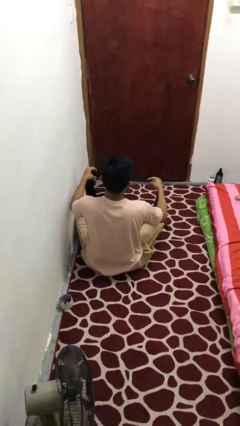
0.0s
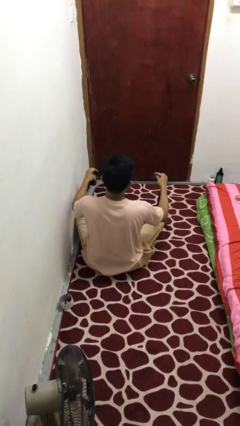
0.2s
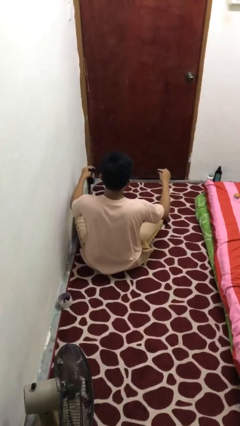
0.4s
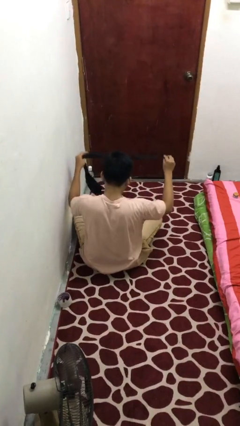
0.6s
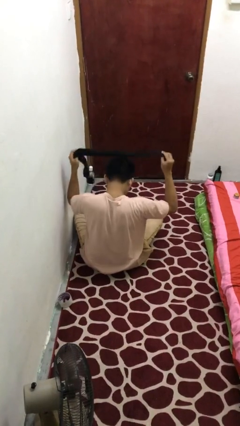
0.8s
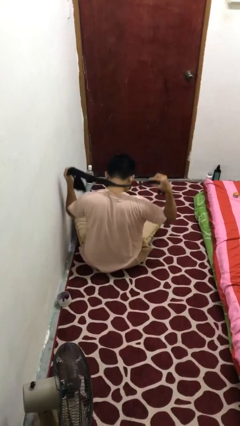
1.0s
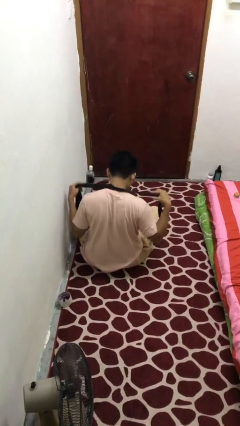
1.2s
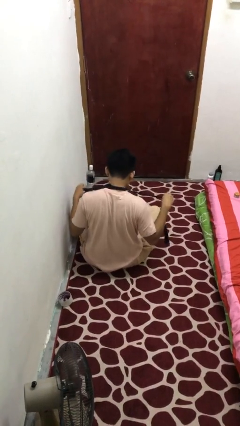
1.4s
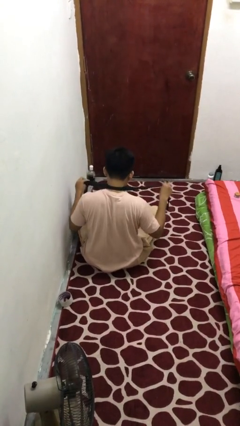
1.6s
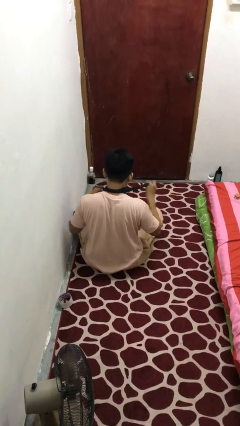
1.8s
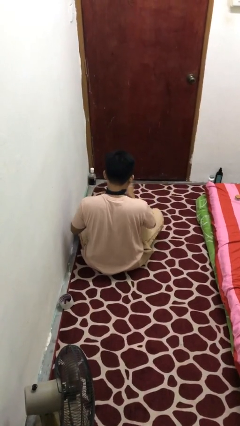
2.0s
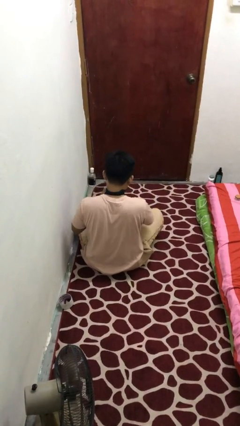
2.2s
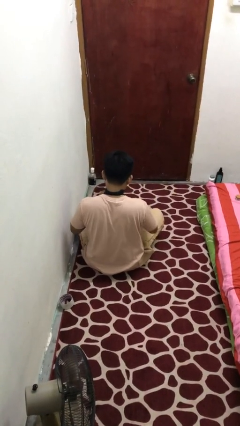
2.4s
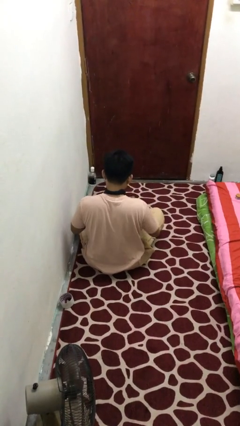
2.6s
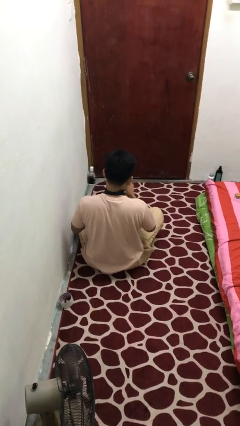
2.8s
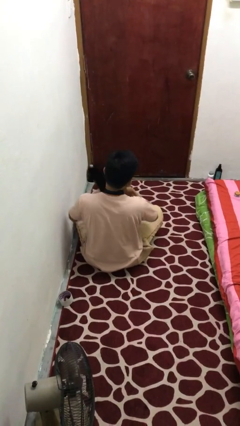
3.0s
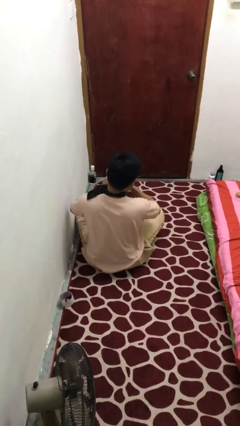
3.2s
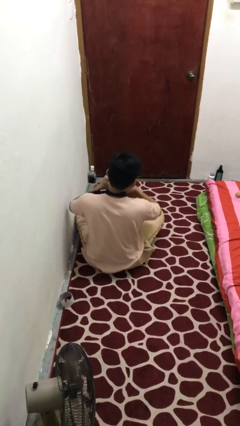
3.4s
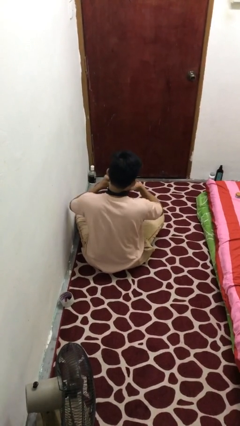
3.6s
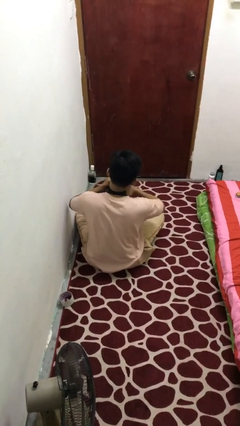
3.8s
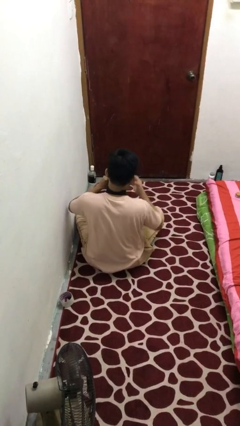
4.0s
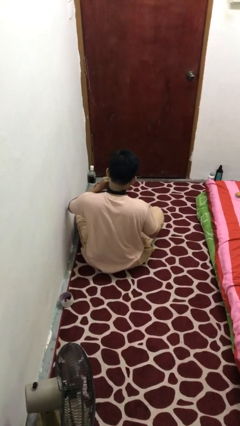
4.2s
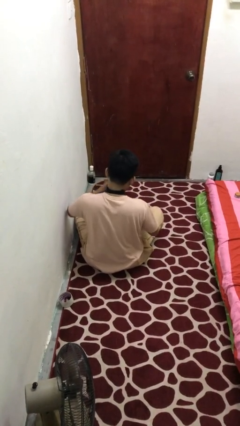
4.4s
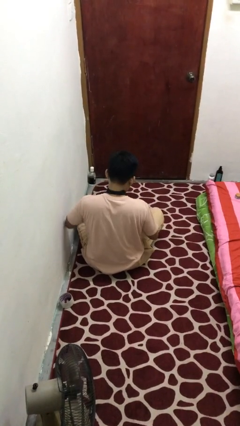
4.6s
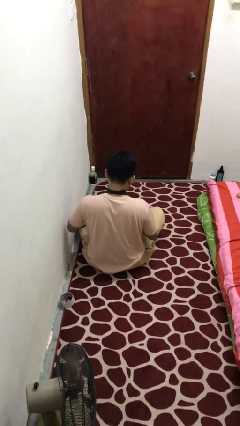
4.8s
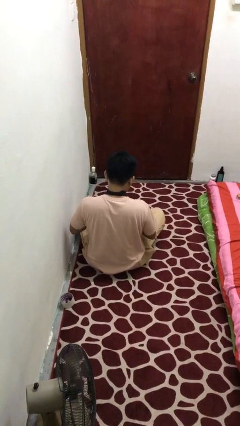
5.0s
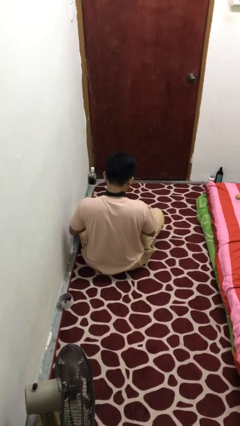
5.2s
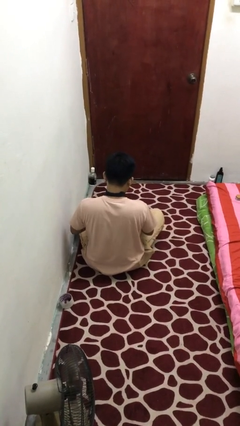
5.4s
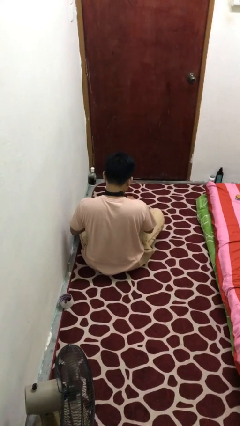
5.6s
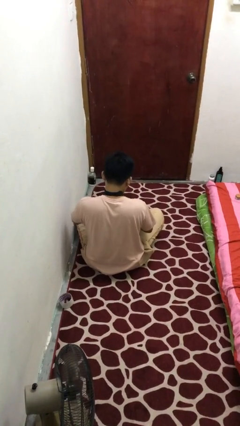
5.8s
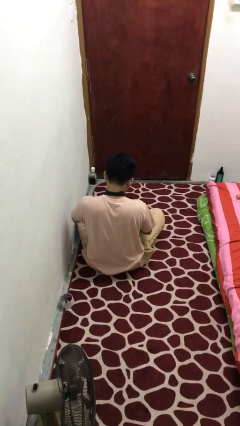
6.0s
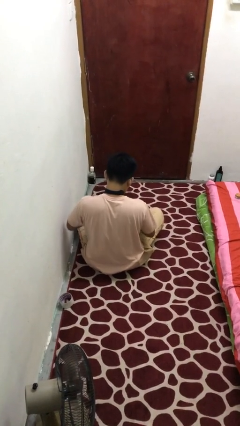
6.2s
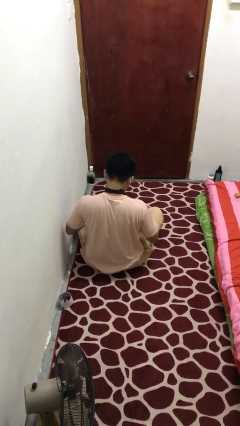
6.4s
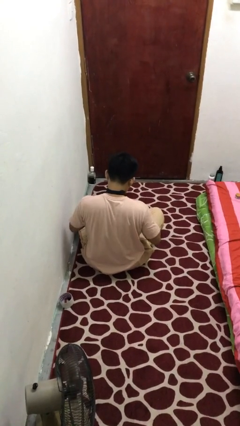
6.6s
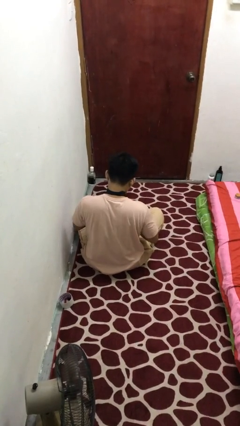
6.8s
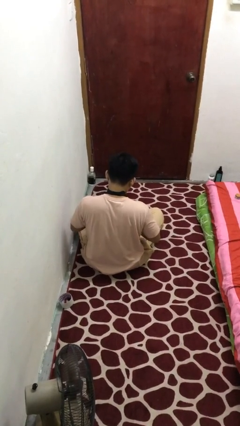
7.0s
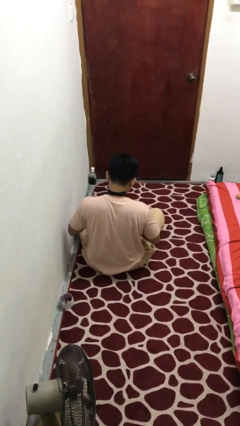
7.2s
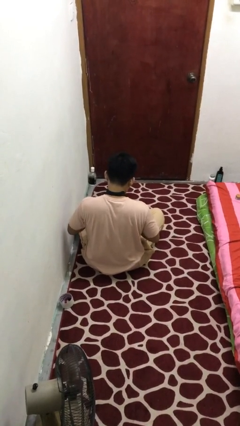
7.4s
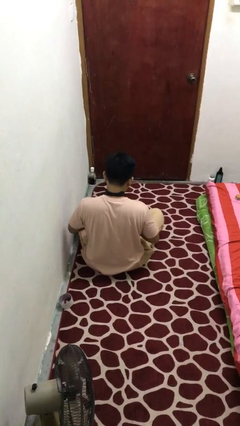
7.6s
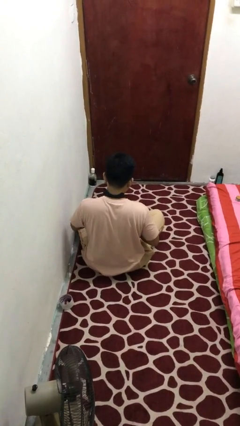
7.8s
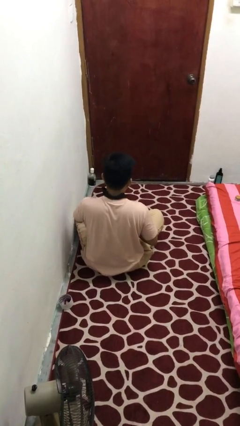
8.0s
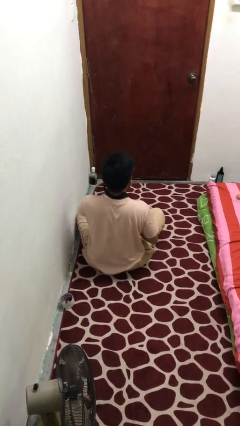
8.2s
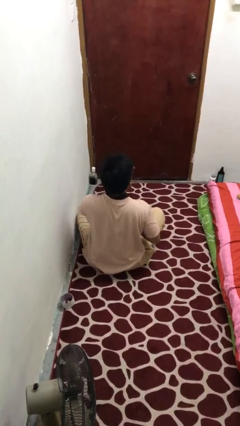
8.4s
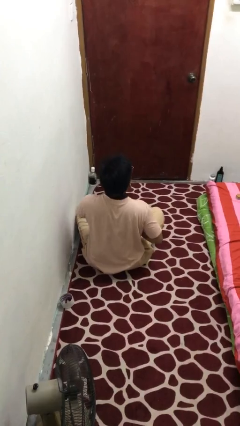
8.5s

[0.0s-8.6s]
person puts on necktie

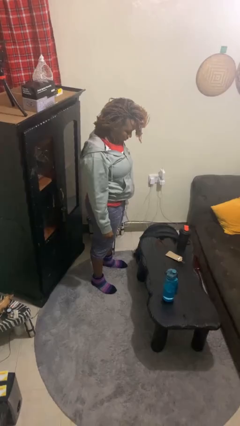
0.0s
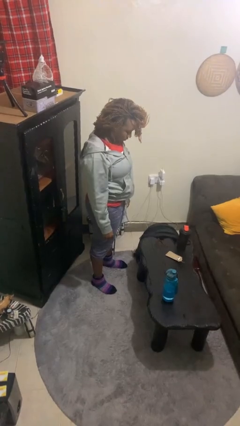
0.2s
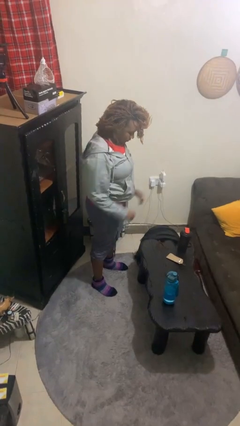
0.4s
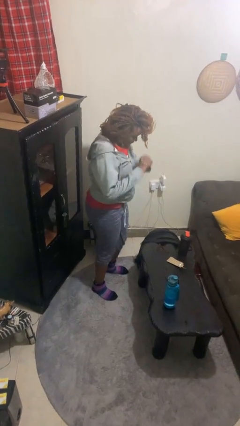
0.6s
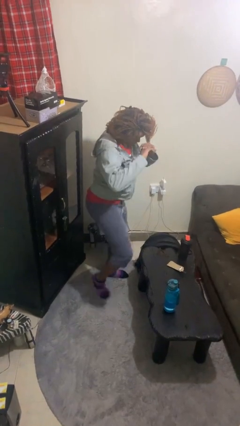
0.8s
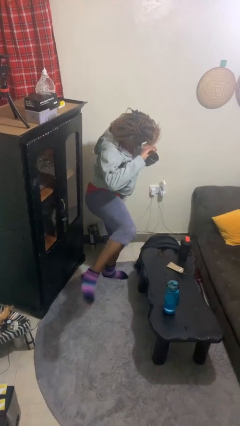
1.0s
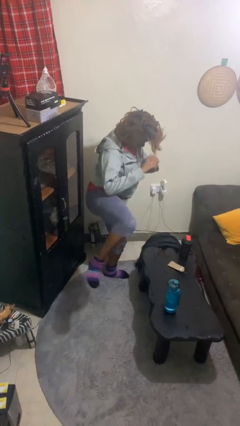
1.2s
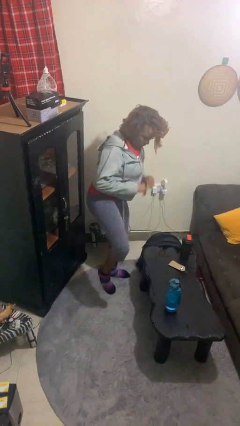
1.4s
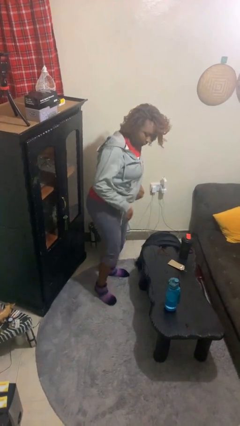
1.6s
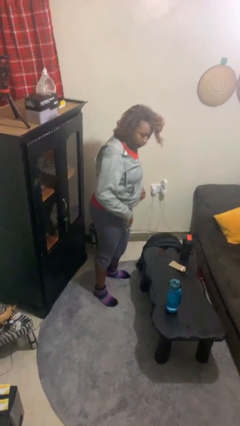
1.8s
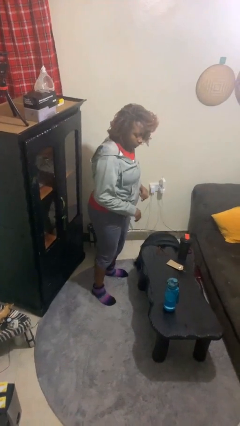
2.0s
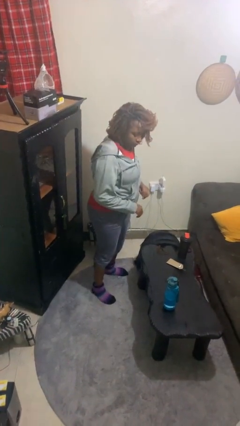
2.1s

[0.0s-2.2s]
person karate kicks

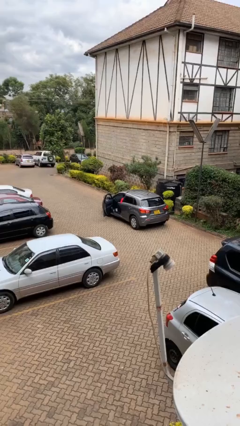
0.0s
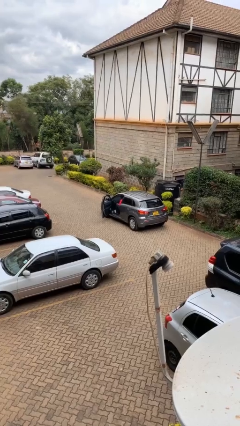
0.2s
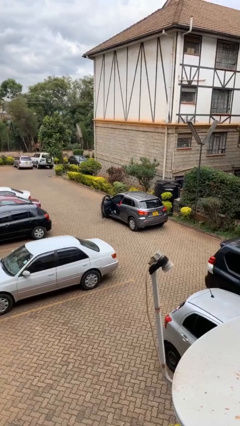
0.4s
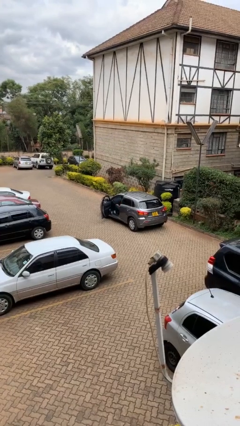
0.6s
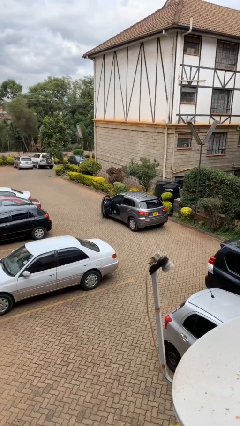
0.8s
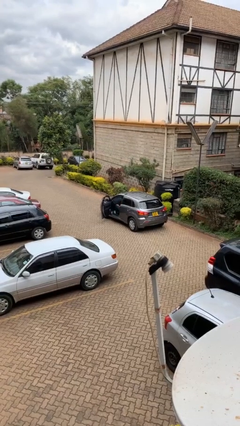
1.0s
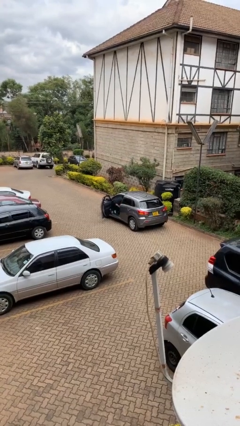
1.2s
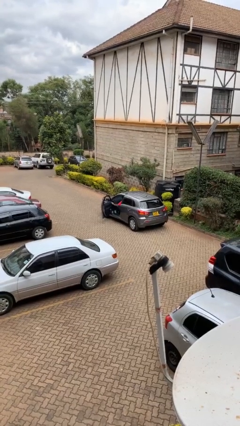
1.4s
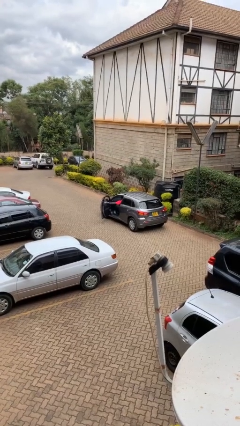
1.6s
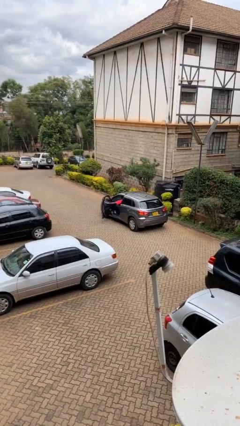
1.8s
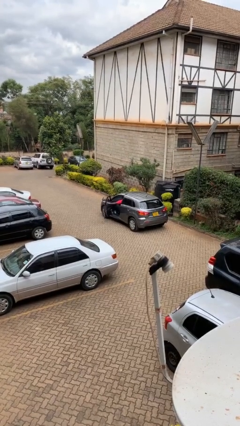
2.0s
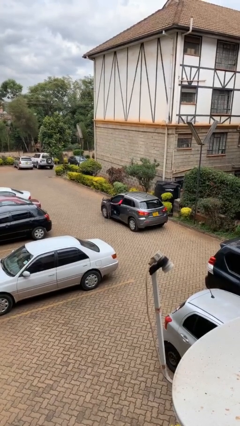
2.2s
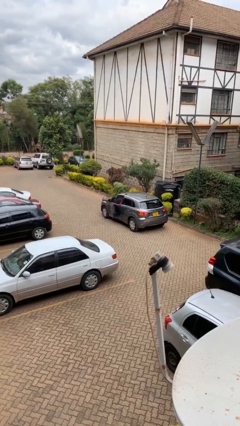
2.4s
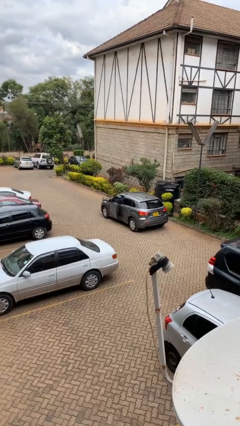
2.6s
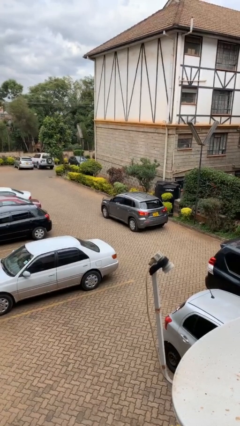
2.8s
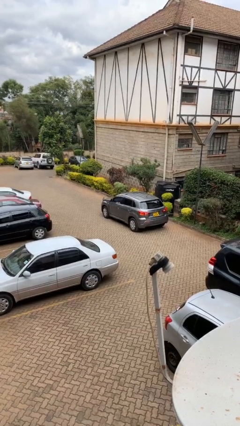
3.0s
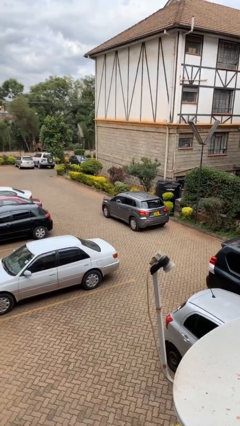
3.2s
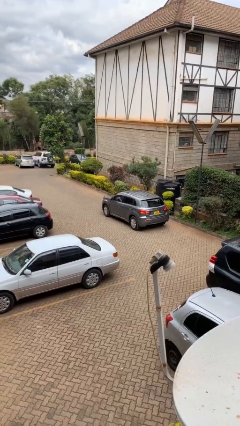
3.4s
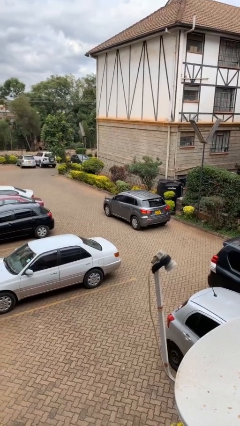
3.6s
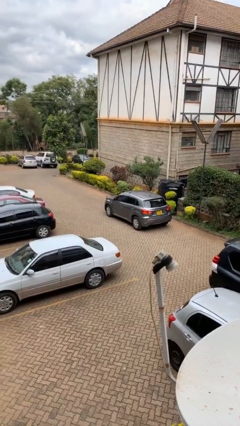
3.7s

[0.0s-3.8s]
person closes car door

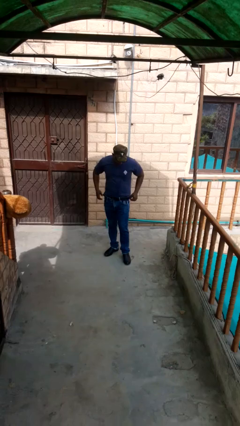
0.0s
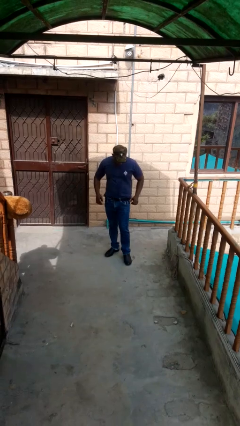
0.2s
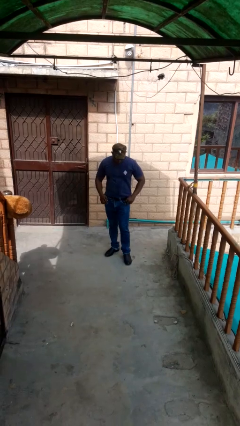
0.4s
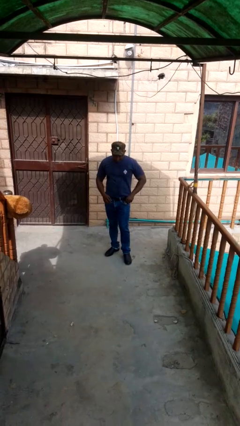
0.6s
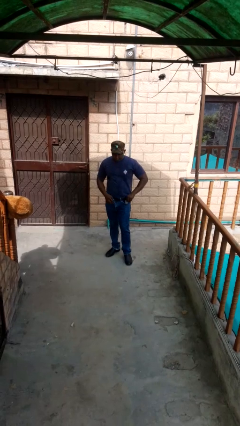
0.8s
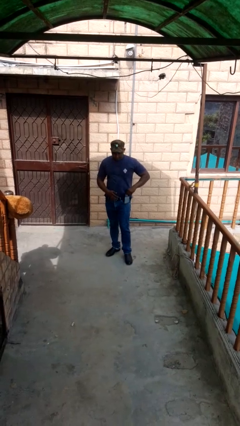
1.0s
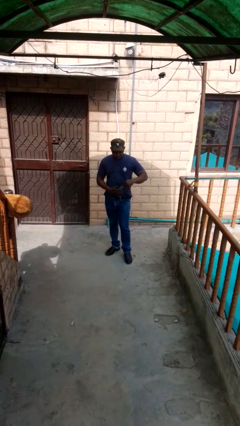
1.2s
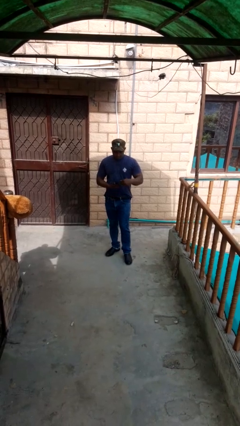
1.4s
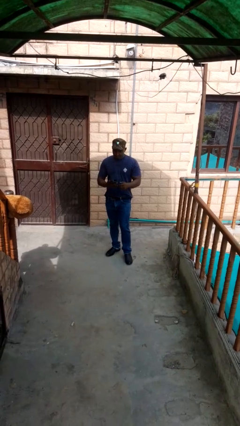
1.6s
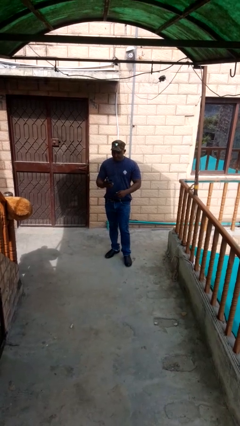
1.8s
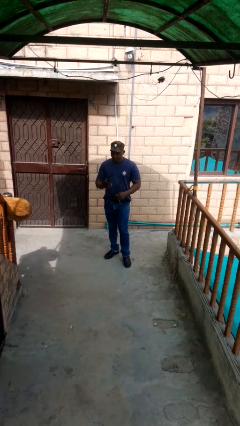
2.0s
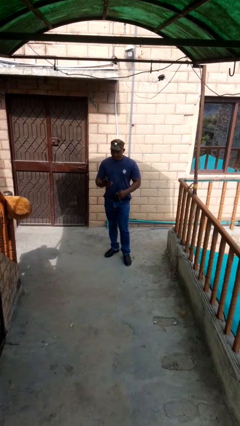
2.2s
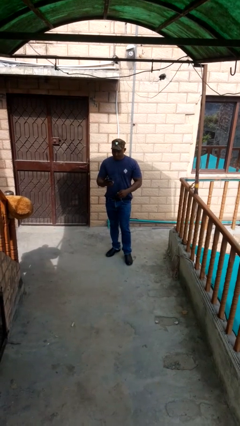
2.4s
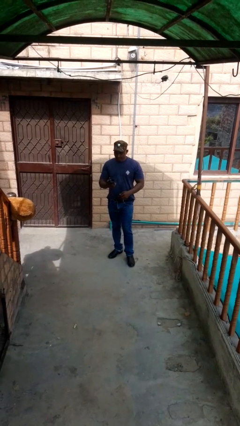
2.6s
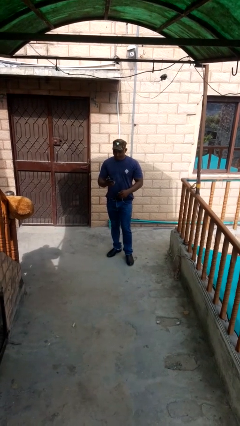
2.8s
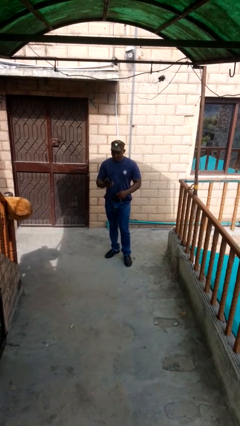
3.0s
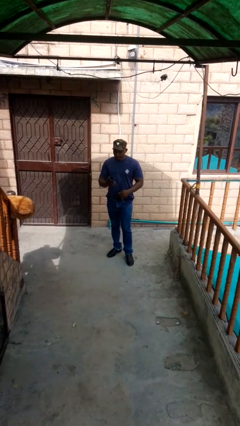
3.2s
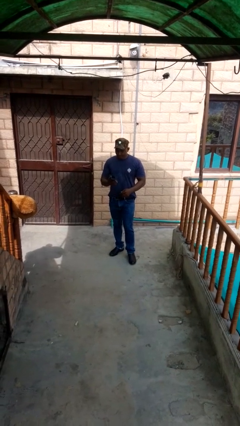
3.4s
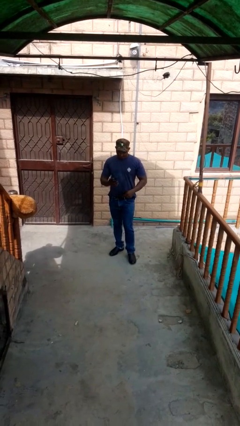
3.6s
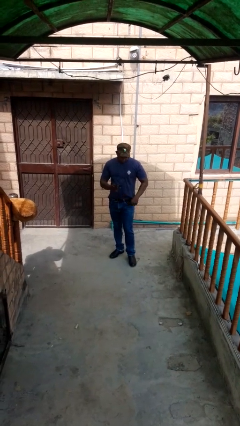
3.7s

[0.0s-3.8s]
person takes phone from pocket
